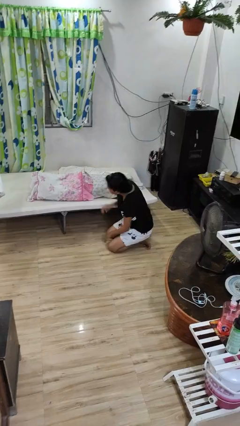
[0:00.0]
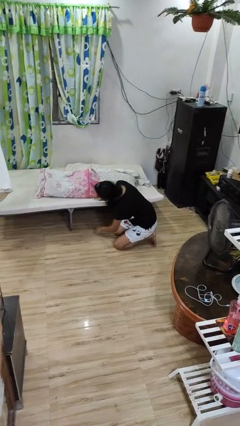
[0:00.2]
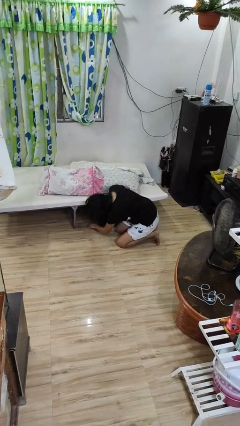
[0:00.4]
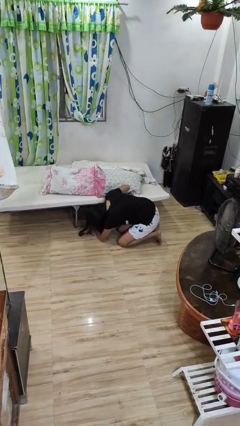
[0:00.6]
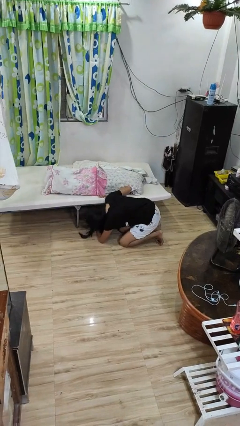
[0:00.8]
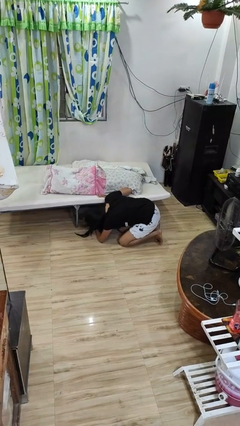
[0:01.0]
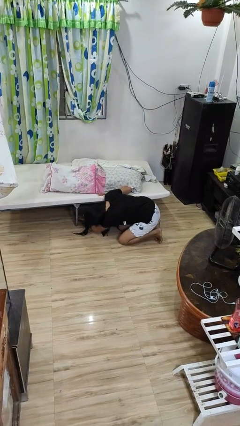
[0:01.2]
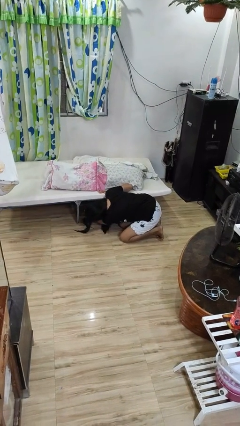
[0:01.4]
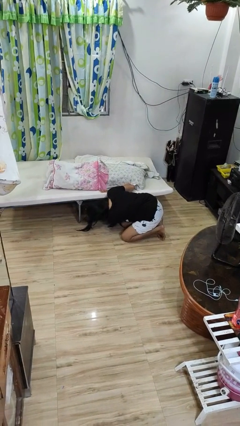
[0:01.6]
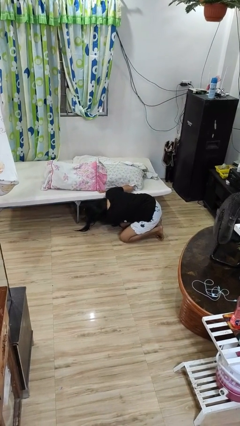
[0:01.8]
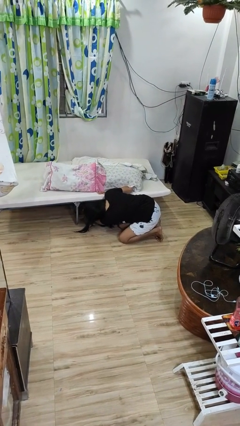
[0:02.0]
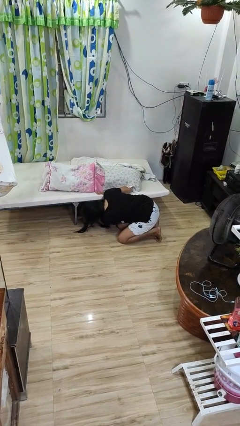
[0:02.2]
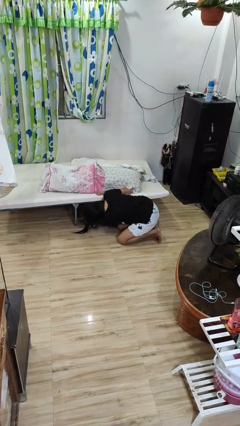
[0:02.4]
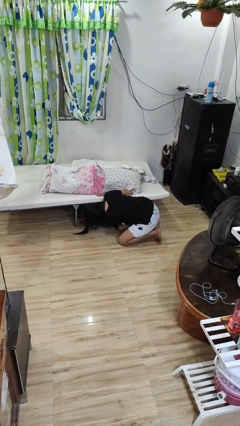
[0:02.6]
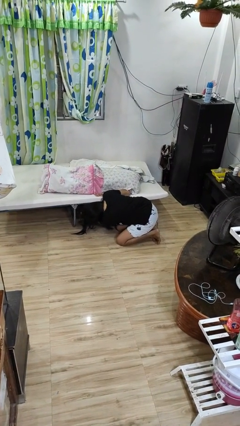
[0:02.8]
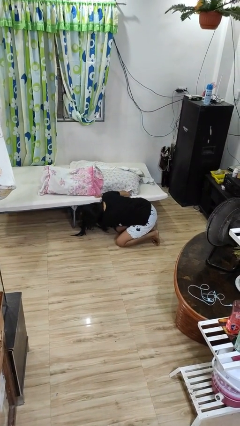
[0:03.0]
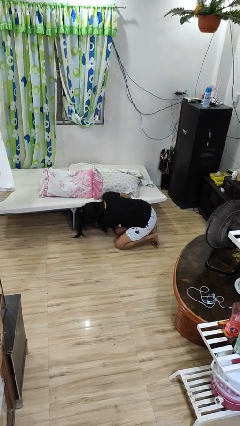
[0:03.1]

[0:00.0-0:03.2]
person searches under bed

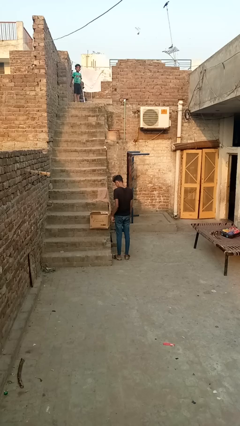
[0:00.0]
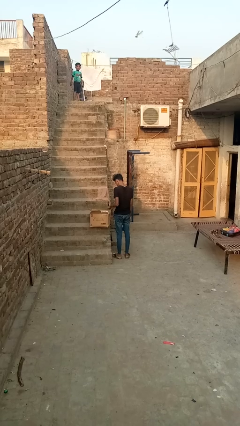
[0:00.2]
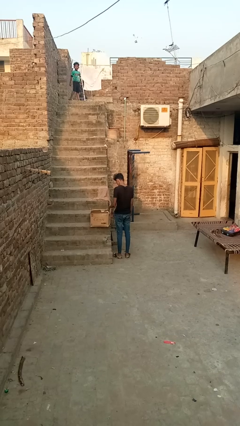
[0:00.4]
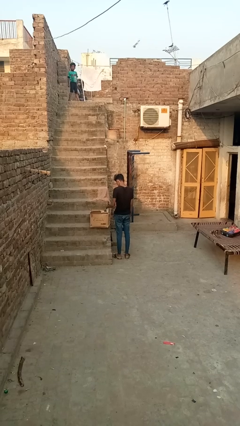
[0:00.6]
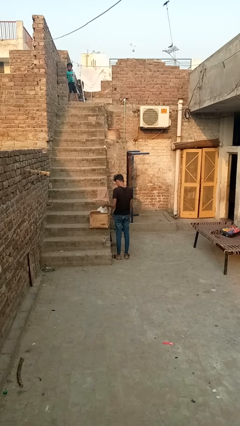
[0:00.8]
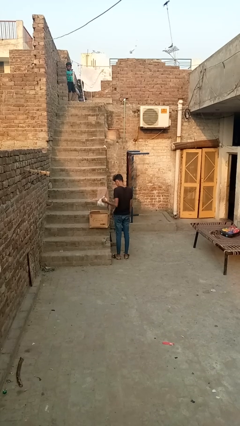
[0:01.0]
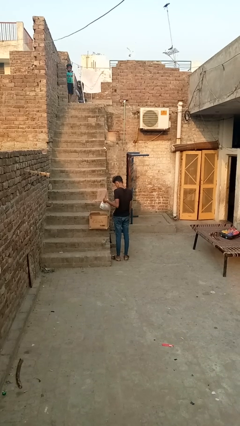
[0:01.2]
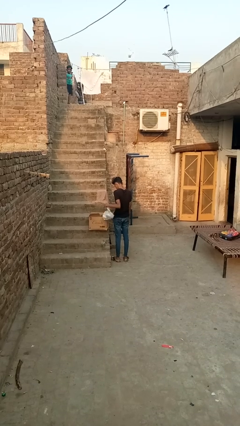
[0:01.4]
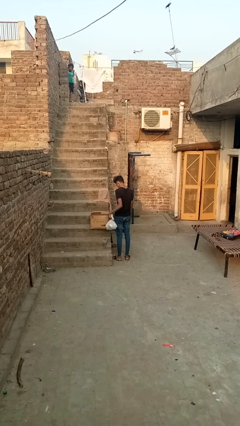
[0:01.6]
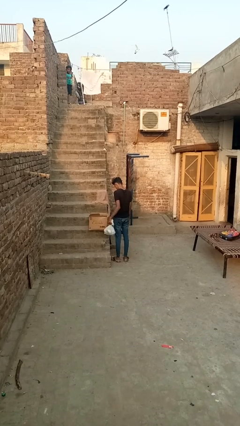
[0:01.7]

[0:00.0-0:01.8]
person takes object from box

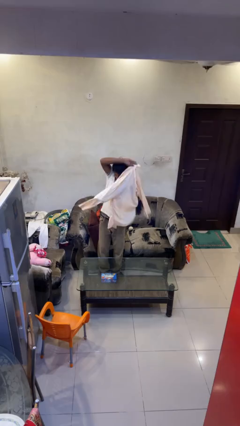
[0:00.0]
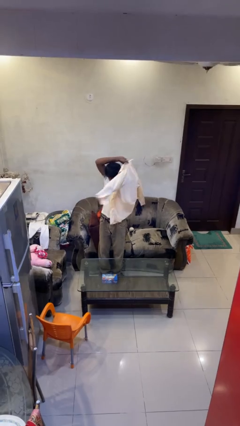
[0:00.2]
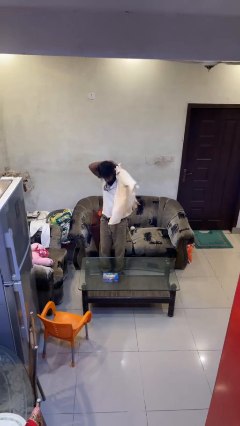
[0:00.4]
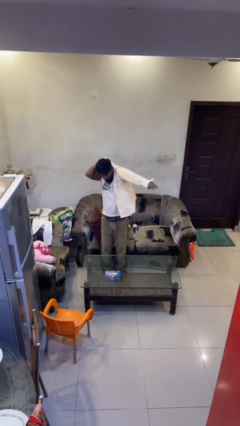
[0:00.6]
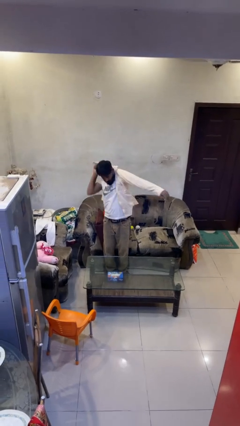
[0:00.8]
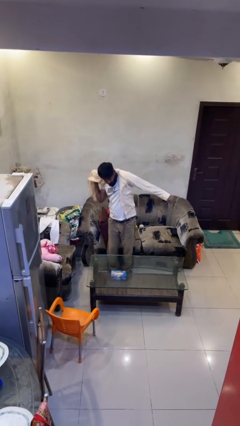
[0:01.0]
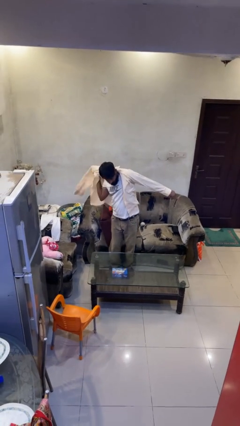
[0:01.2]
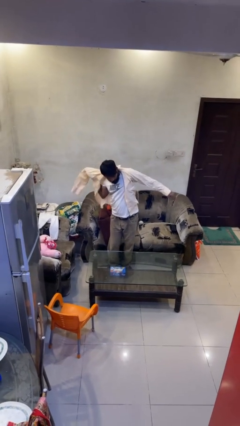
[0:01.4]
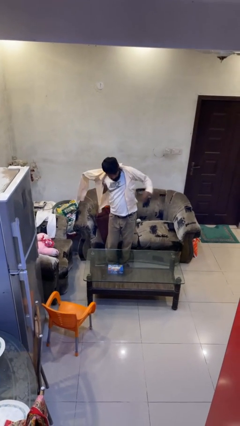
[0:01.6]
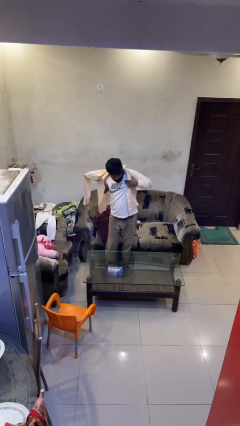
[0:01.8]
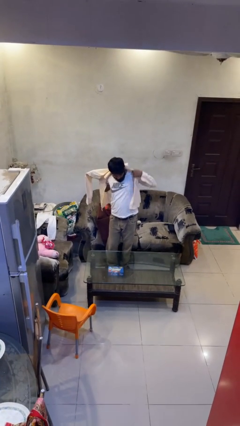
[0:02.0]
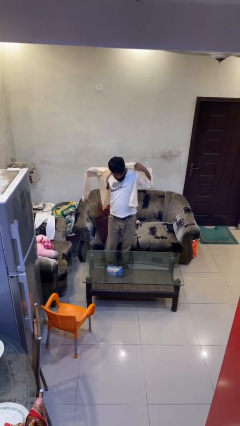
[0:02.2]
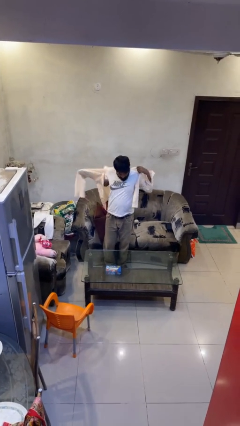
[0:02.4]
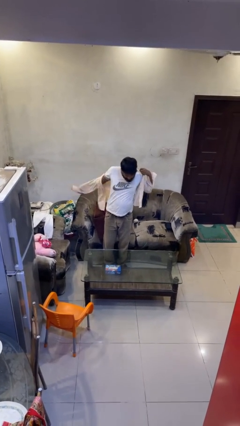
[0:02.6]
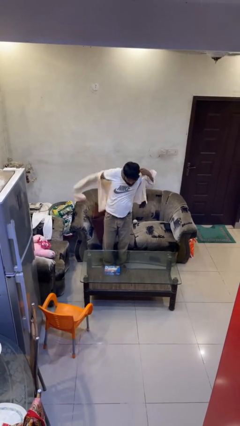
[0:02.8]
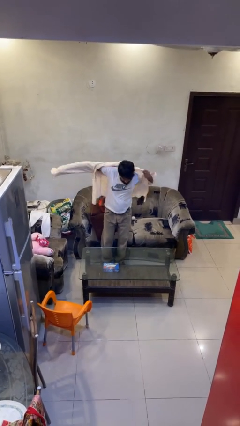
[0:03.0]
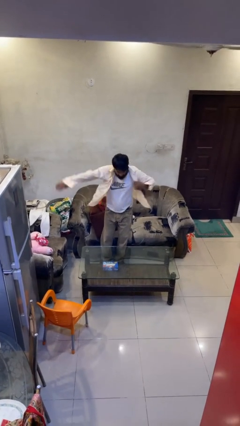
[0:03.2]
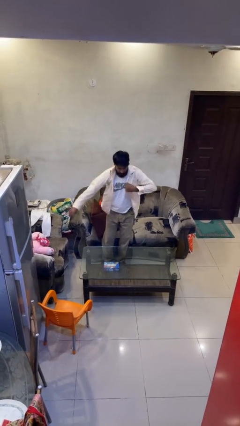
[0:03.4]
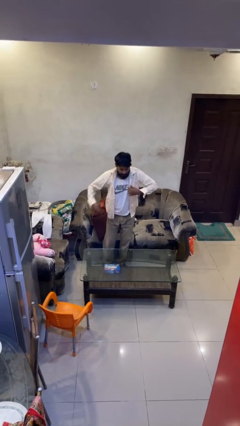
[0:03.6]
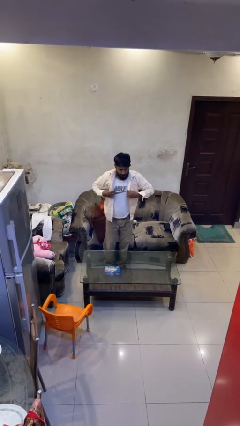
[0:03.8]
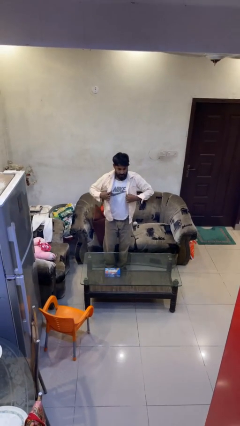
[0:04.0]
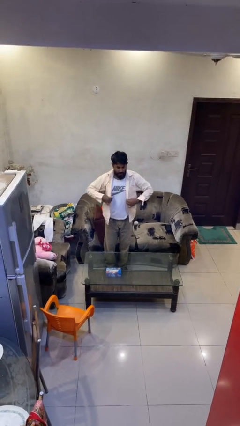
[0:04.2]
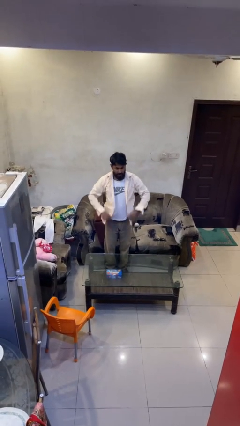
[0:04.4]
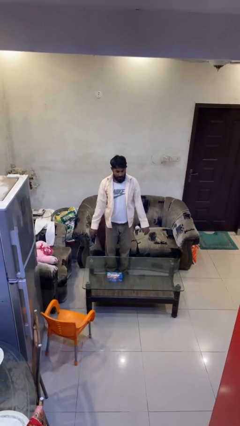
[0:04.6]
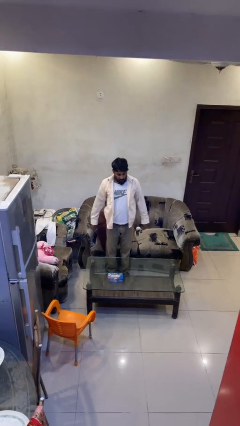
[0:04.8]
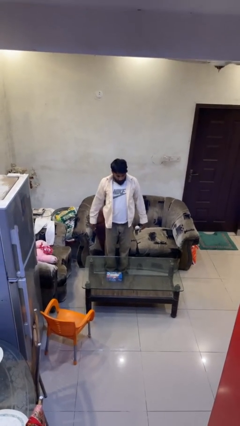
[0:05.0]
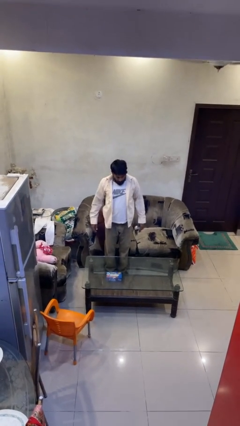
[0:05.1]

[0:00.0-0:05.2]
person puts on shirt

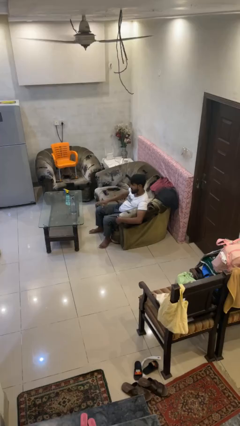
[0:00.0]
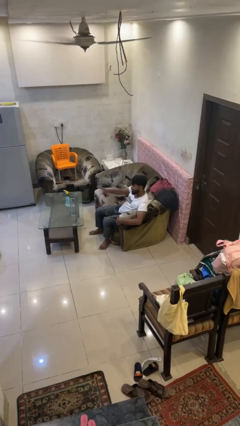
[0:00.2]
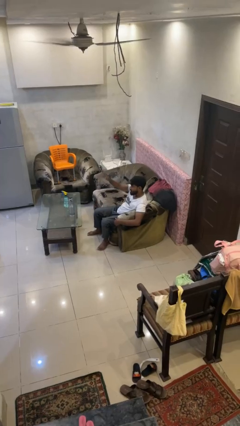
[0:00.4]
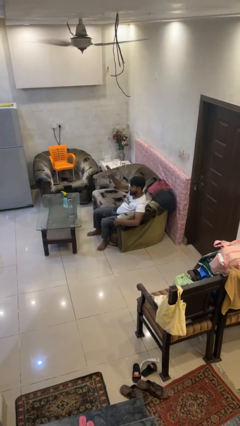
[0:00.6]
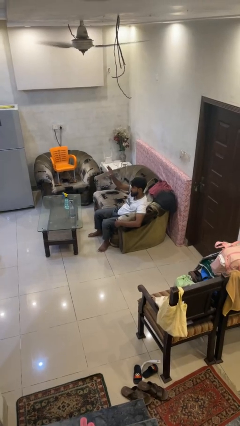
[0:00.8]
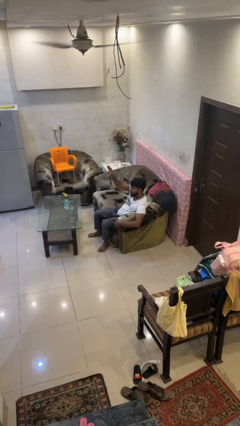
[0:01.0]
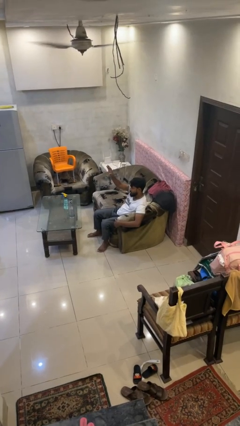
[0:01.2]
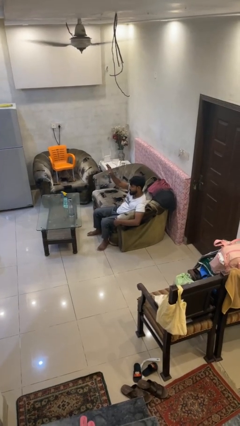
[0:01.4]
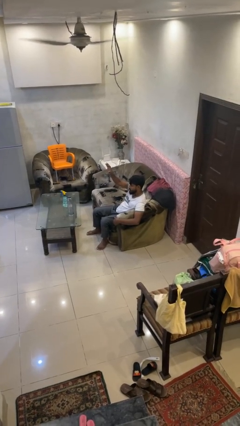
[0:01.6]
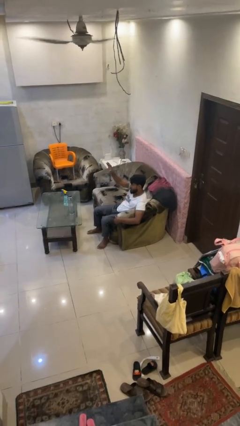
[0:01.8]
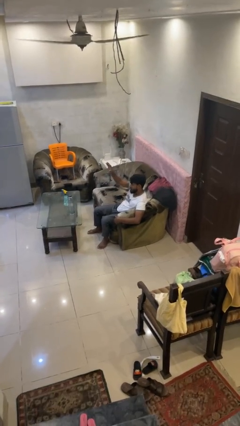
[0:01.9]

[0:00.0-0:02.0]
person gestures raise hand

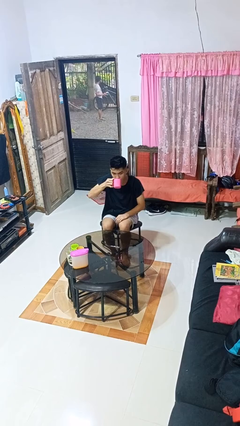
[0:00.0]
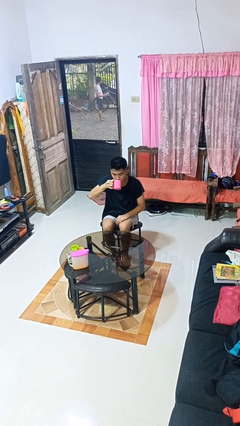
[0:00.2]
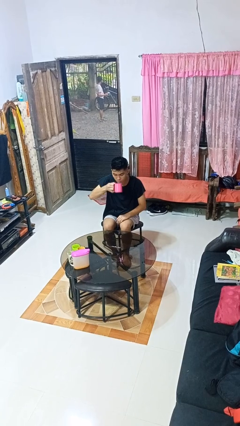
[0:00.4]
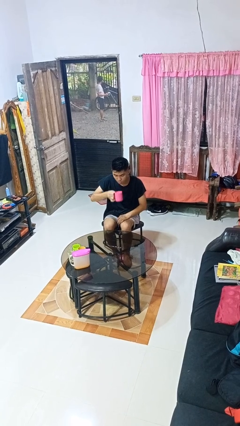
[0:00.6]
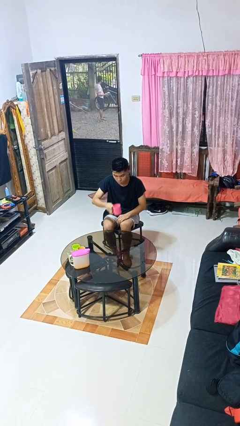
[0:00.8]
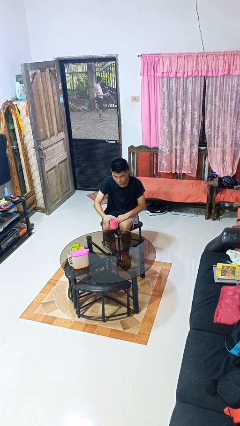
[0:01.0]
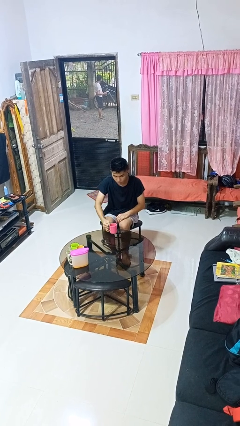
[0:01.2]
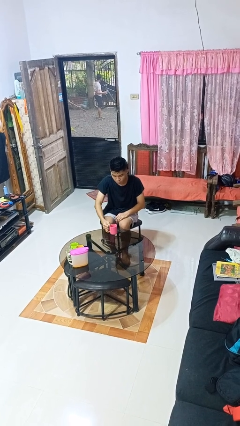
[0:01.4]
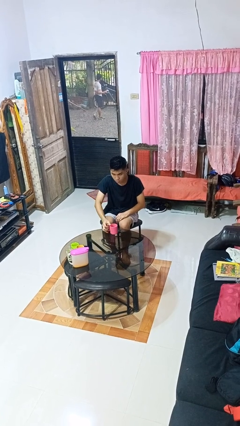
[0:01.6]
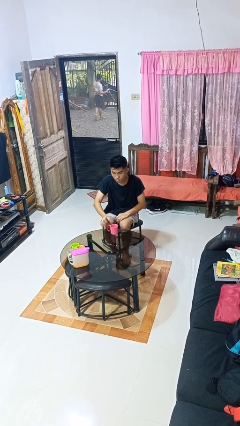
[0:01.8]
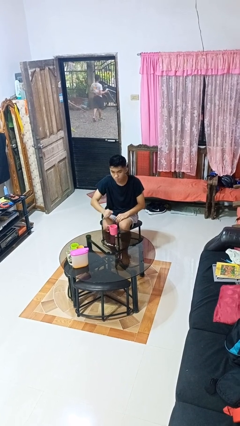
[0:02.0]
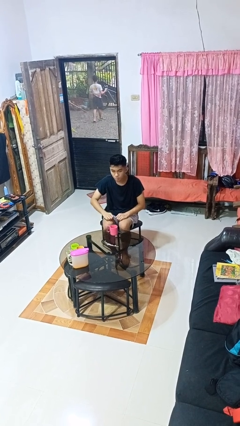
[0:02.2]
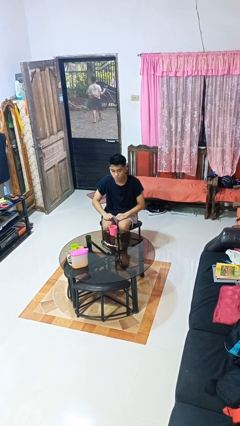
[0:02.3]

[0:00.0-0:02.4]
person puts down object on table

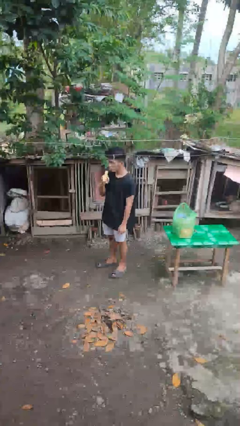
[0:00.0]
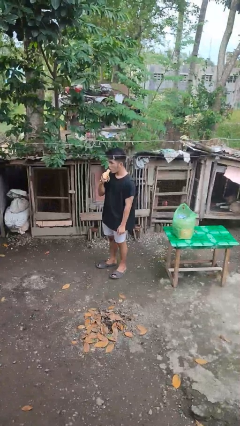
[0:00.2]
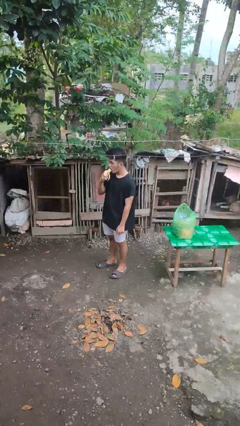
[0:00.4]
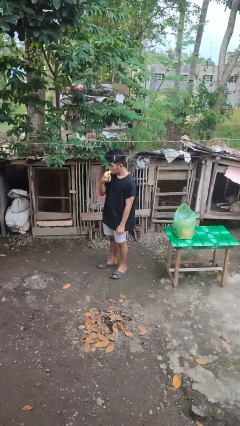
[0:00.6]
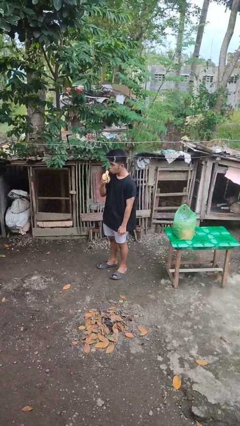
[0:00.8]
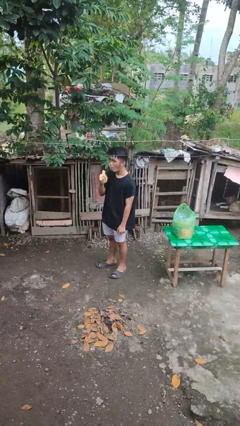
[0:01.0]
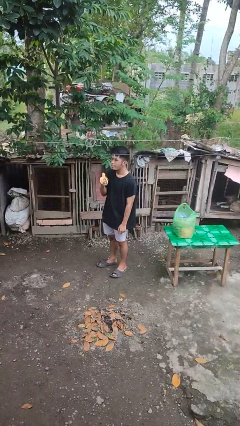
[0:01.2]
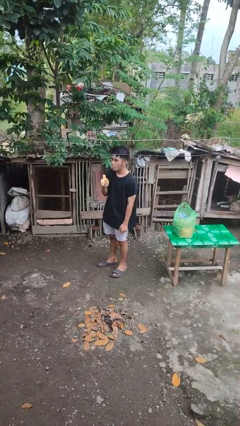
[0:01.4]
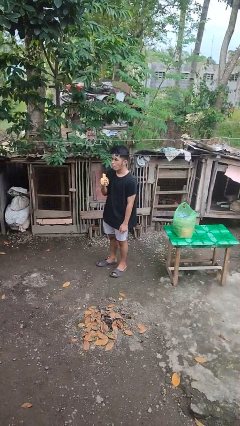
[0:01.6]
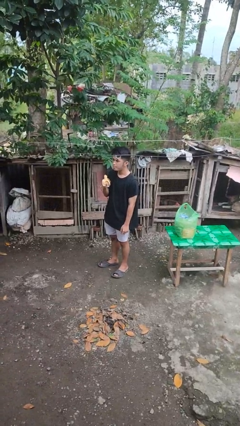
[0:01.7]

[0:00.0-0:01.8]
person eats banana

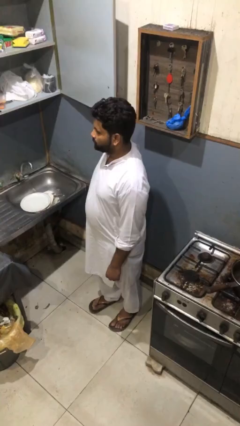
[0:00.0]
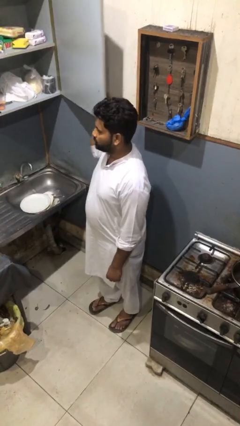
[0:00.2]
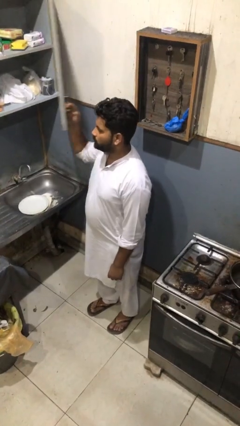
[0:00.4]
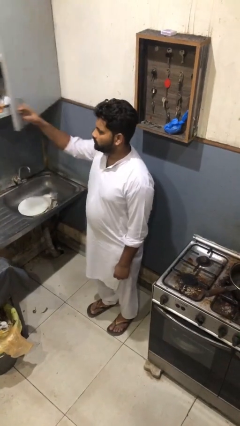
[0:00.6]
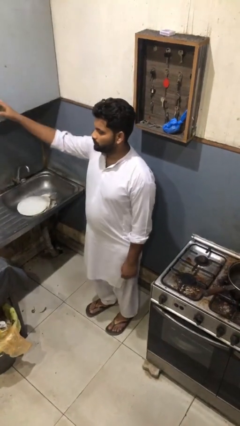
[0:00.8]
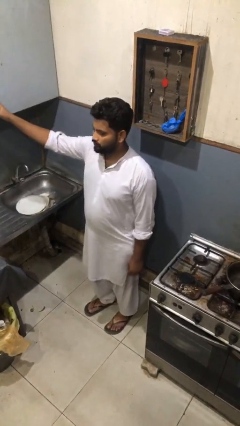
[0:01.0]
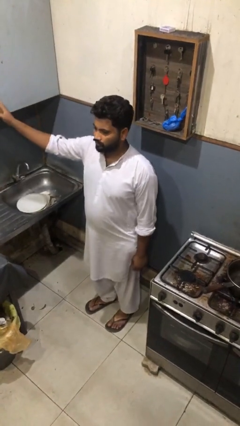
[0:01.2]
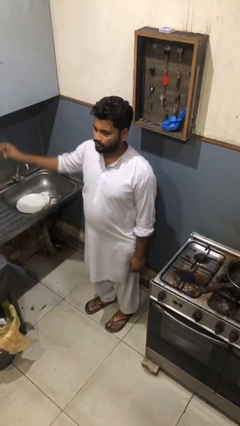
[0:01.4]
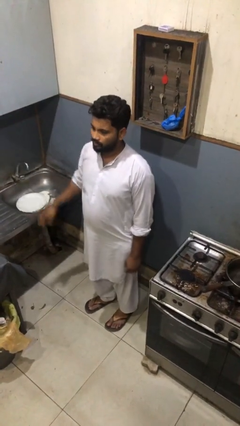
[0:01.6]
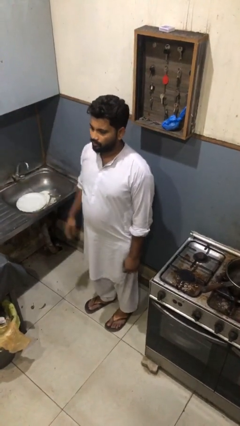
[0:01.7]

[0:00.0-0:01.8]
person closes cabinet
